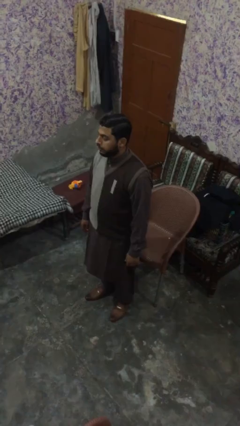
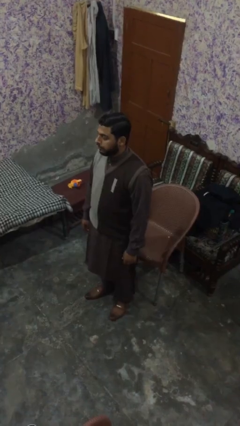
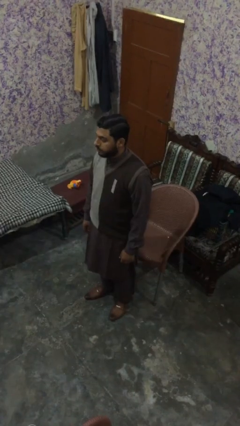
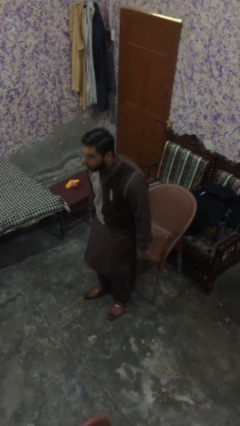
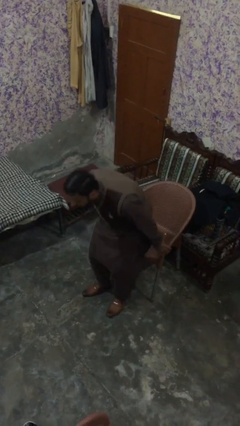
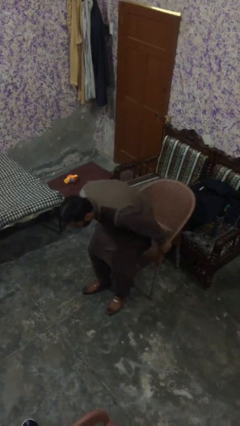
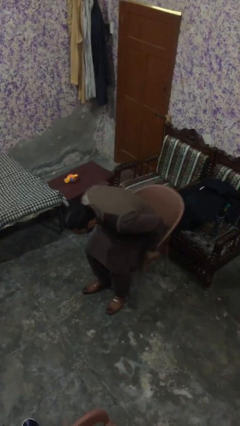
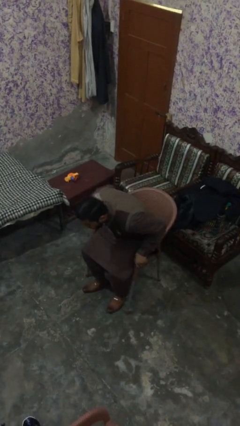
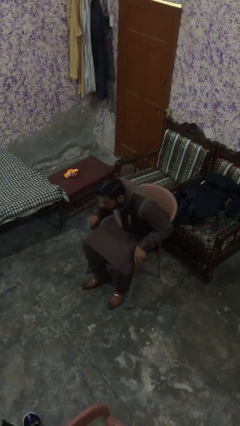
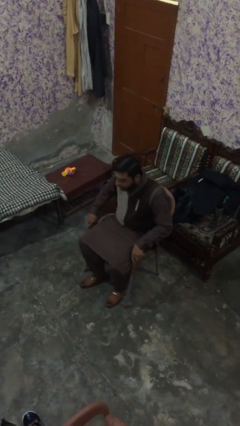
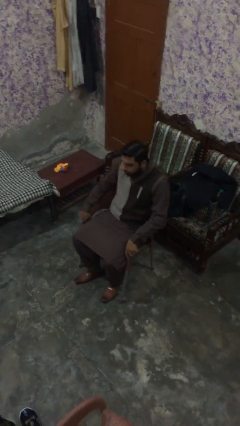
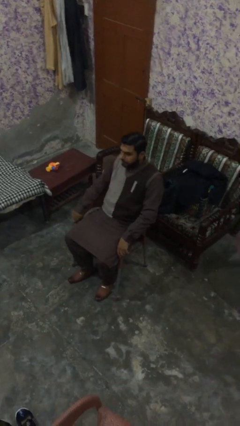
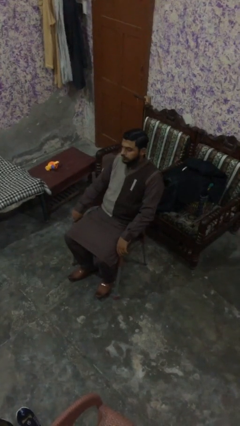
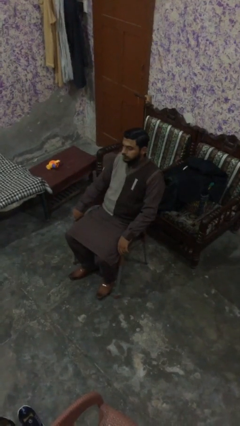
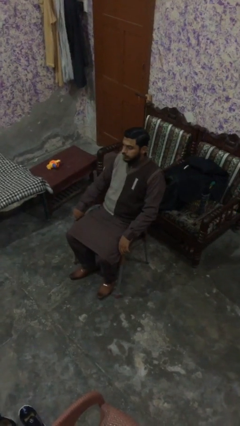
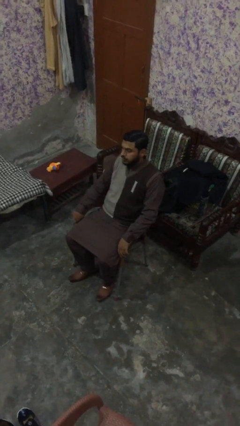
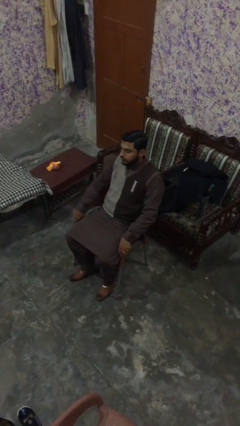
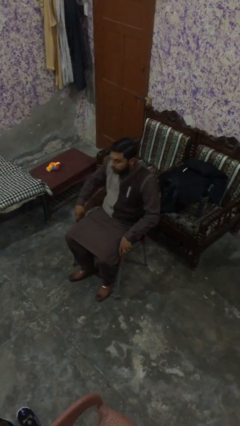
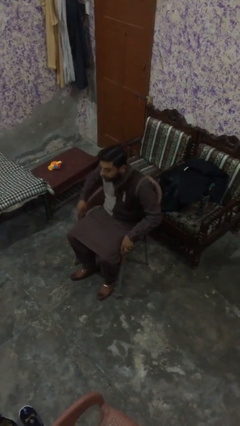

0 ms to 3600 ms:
person sits down

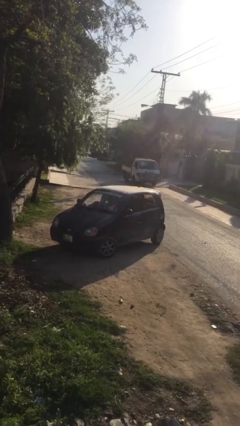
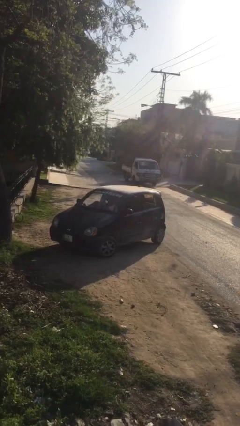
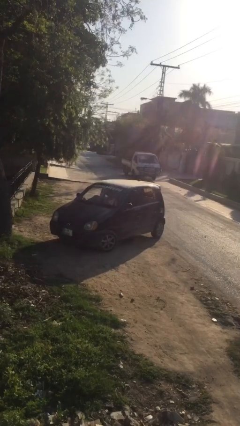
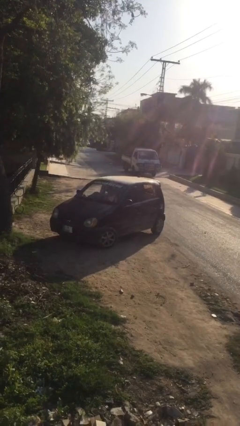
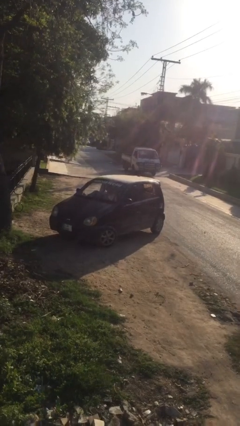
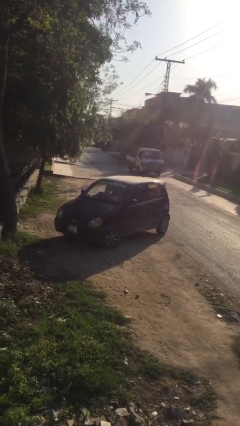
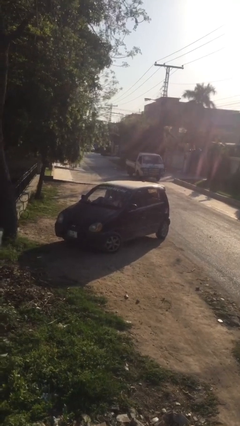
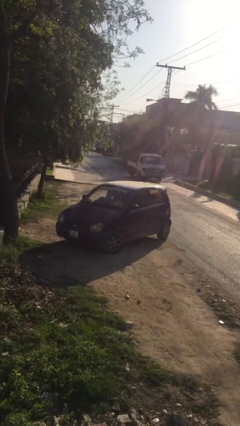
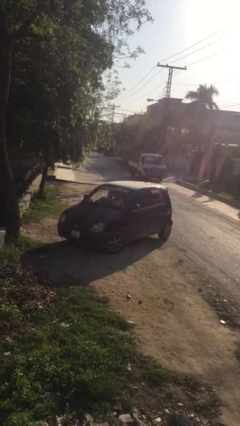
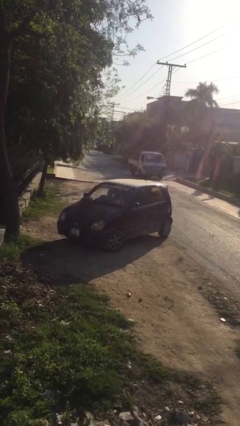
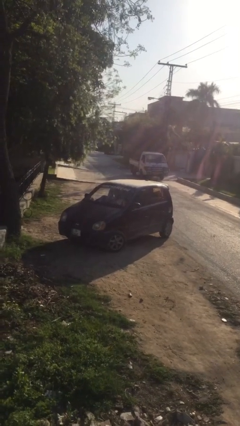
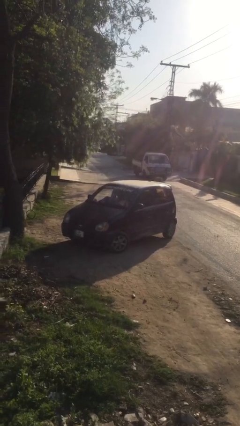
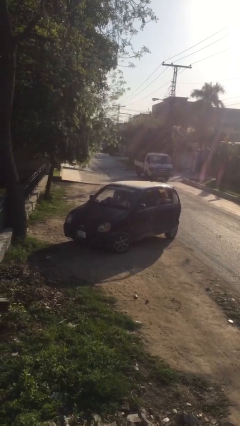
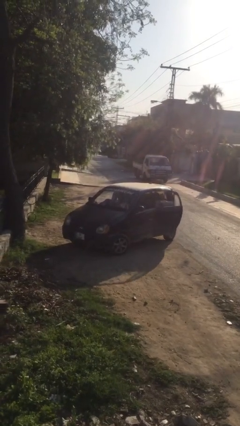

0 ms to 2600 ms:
car drops off person

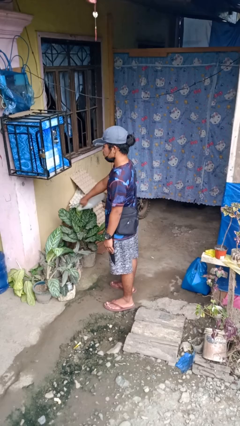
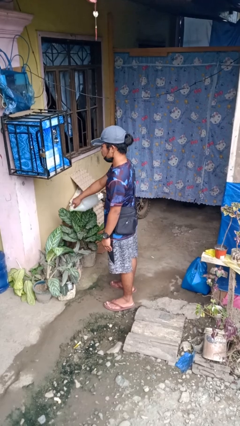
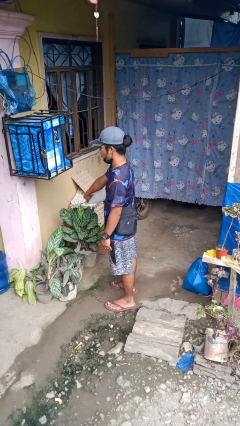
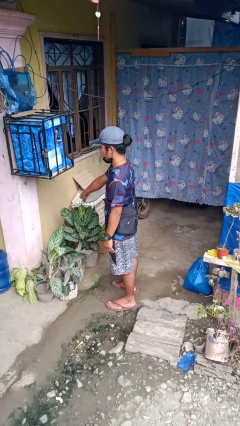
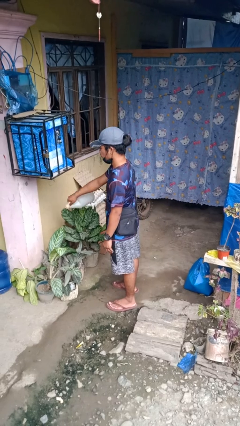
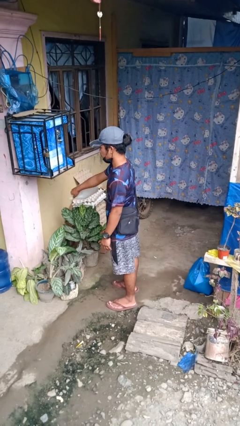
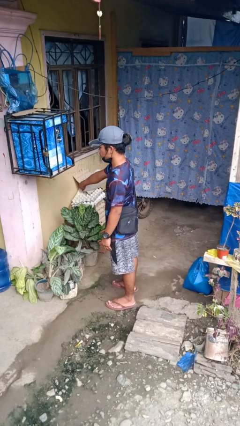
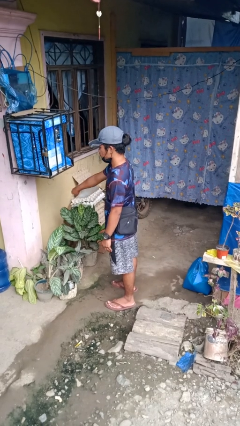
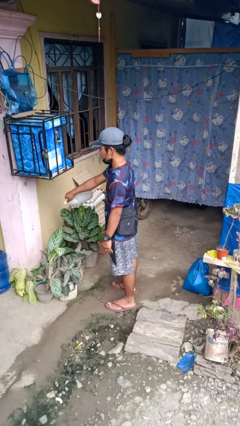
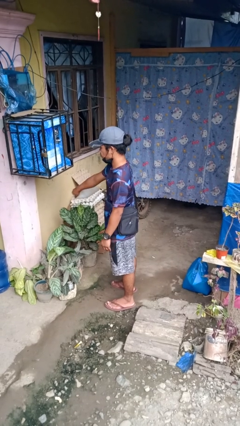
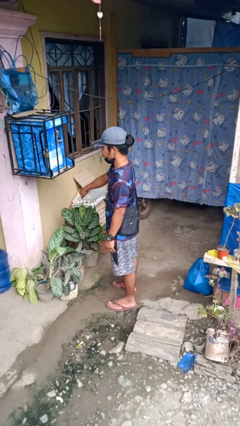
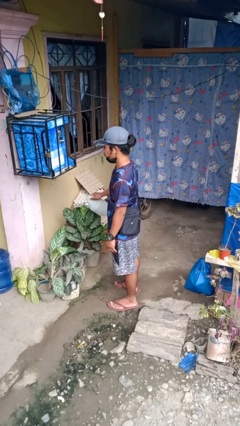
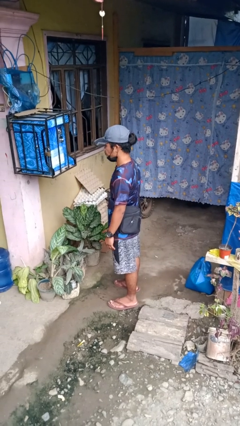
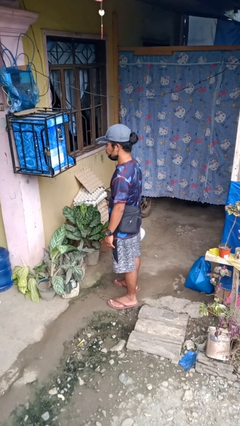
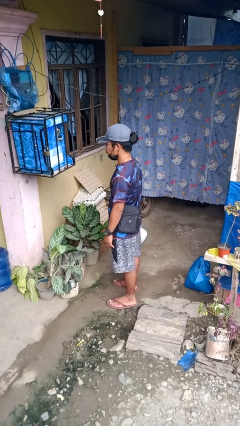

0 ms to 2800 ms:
person waters houseplant

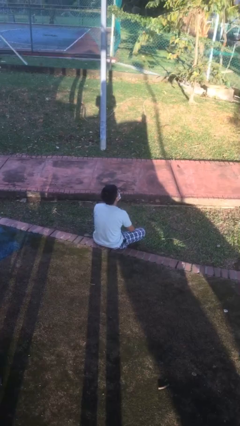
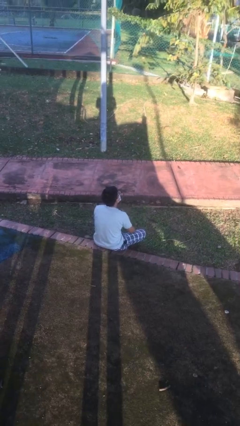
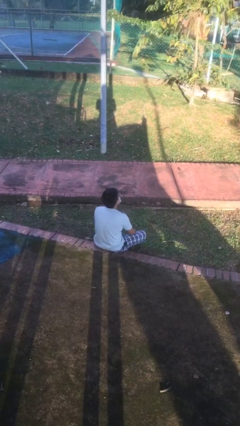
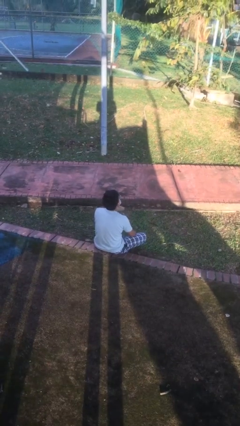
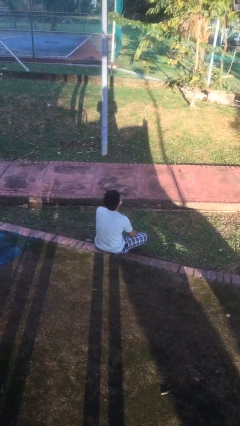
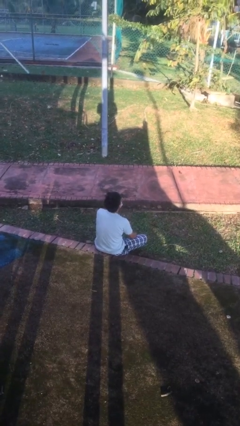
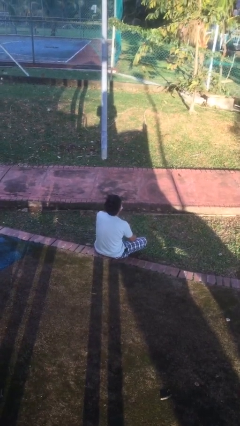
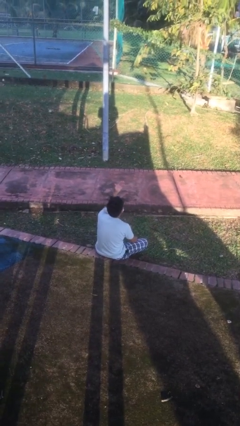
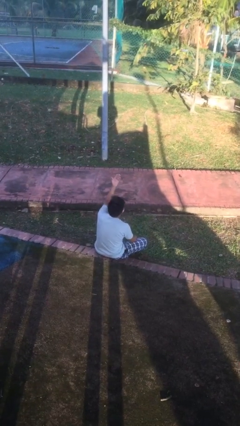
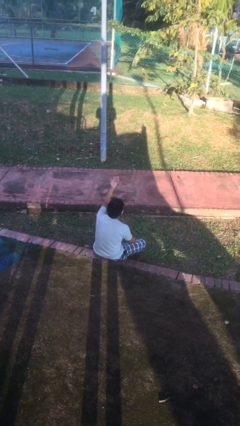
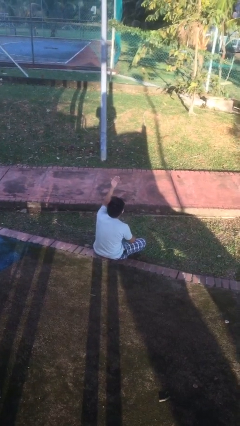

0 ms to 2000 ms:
person gestures blow kiss

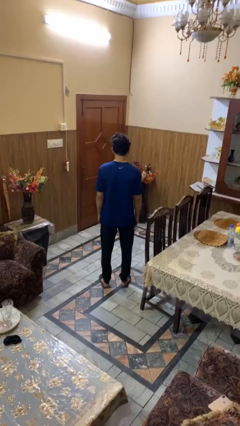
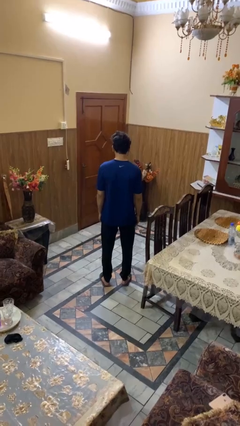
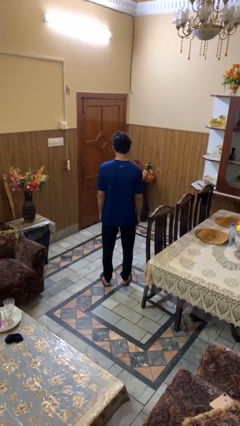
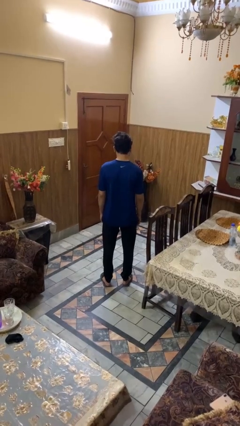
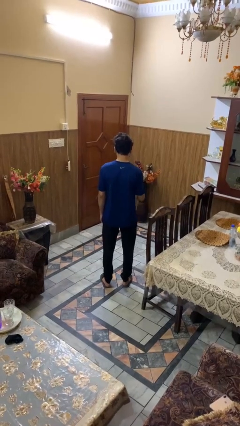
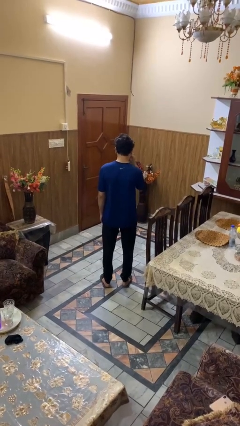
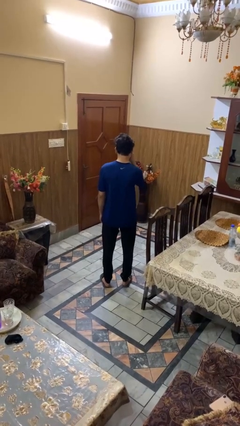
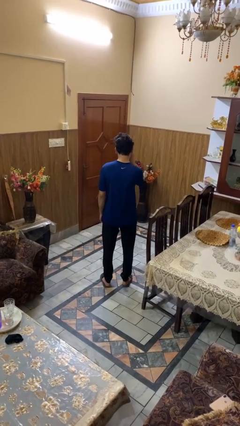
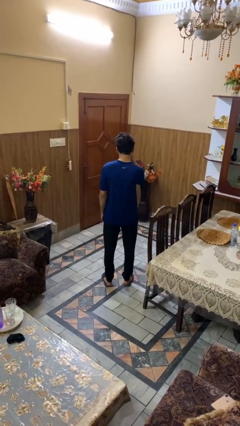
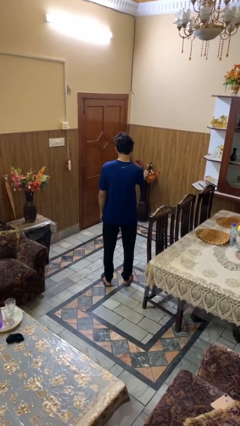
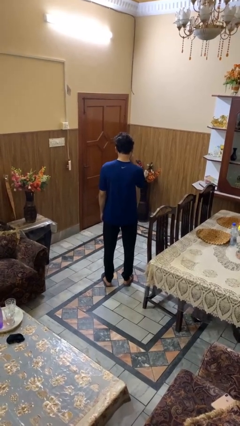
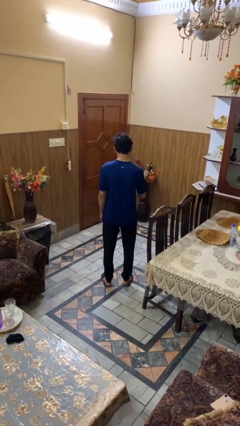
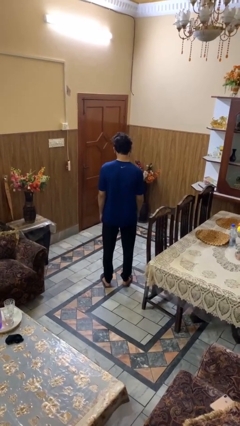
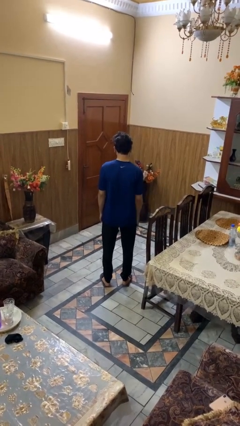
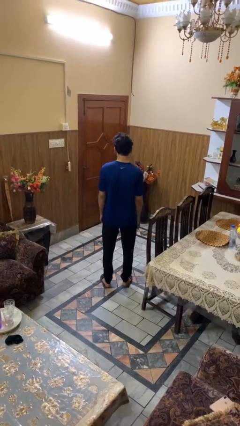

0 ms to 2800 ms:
person rubs eyes

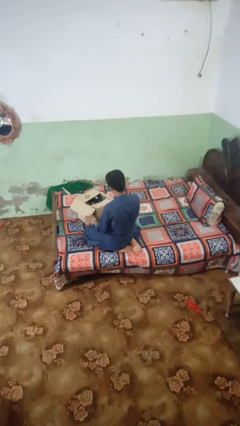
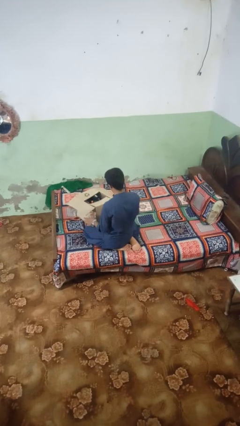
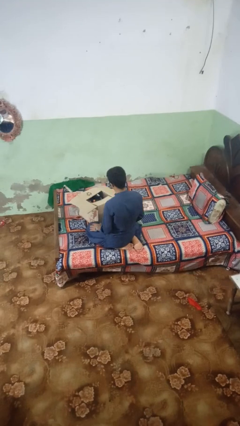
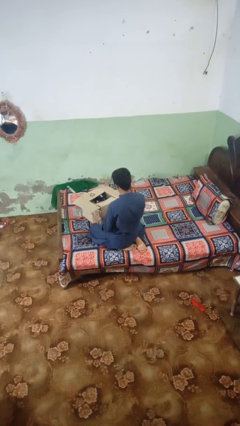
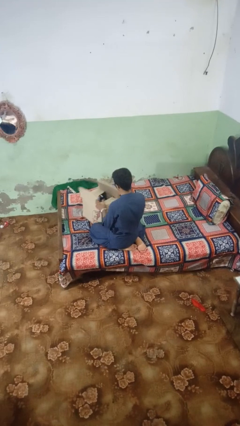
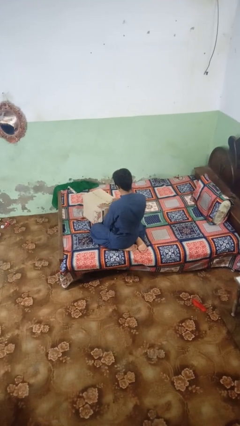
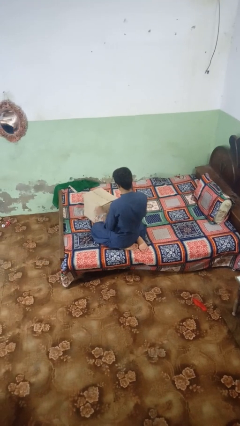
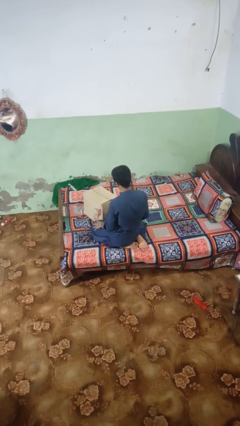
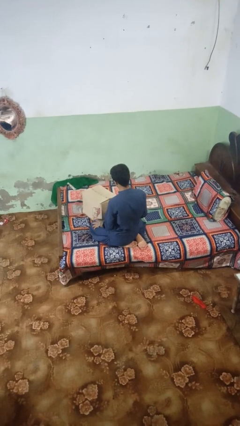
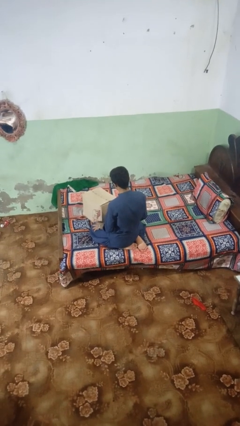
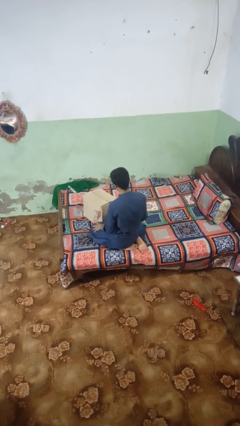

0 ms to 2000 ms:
person closes box

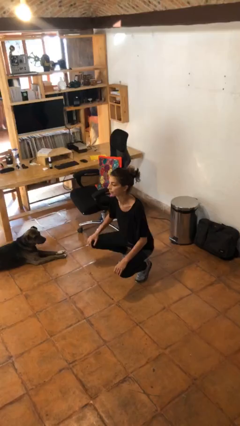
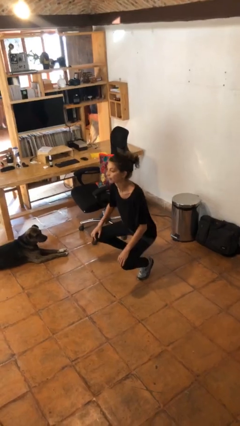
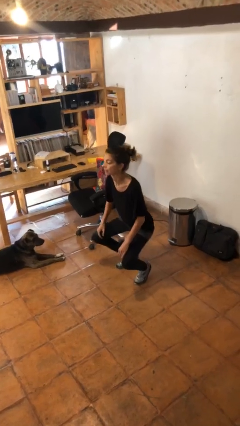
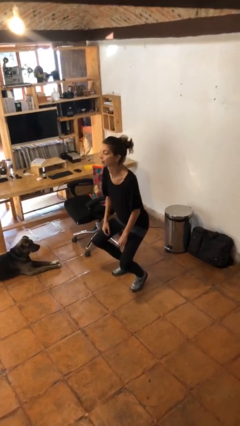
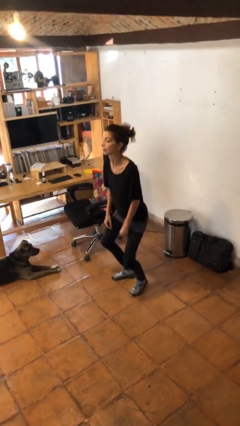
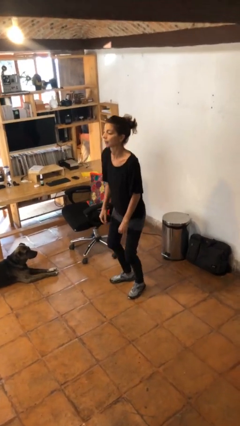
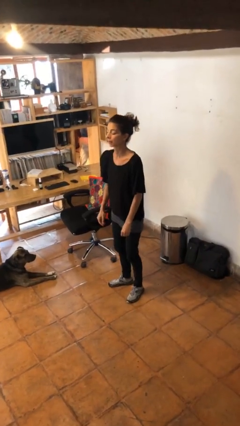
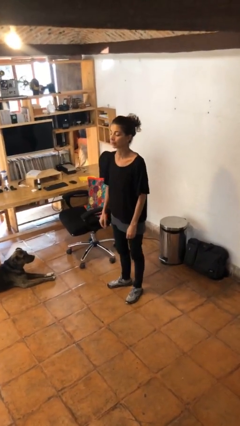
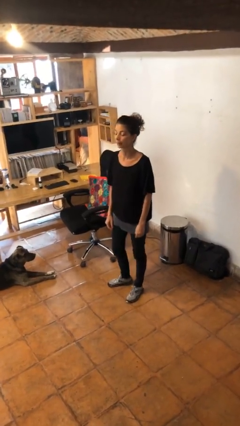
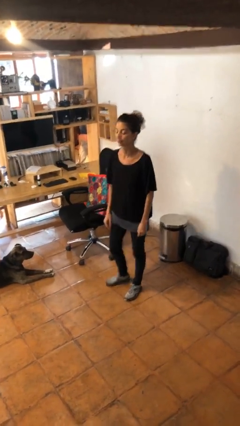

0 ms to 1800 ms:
person stands up
